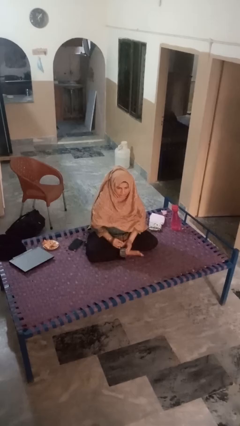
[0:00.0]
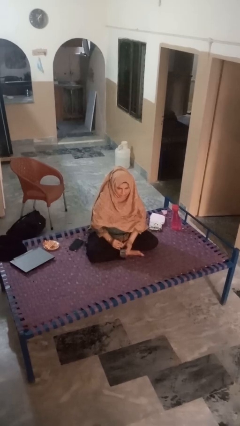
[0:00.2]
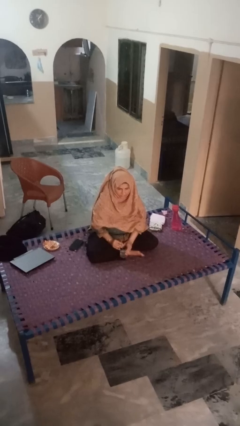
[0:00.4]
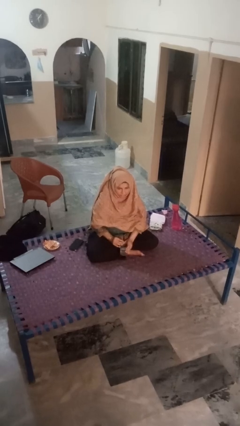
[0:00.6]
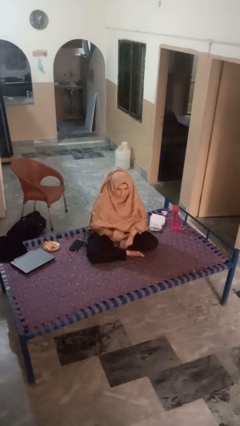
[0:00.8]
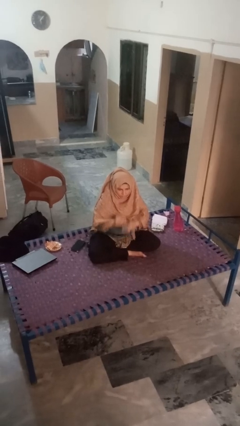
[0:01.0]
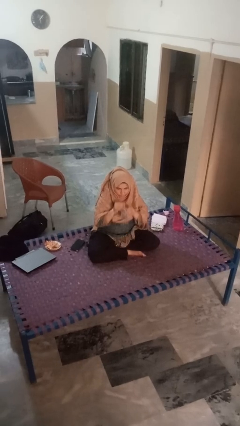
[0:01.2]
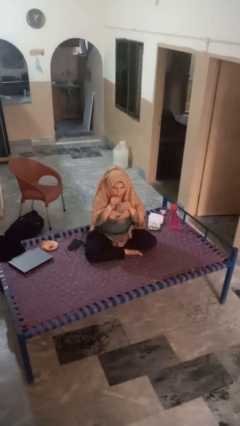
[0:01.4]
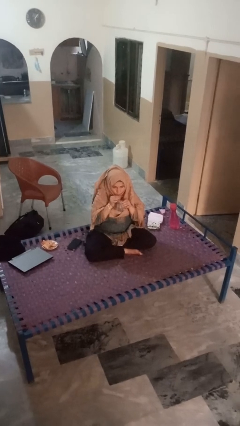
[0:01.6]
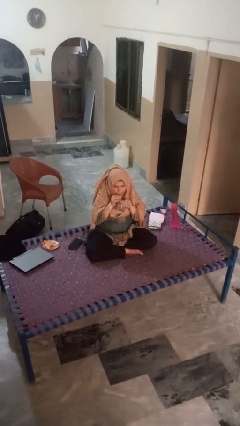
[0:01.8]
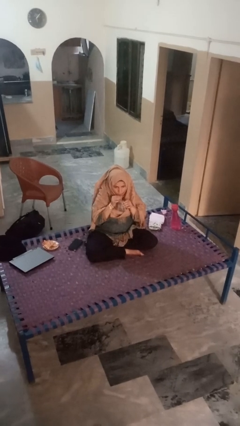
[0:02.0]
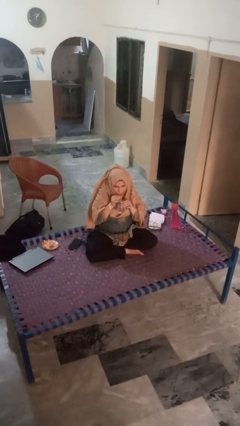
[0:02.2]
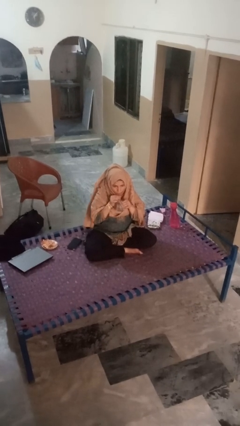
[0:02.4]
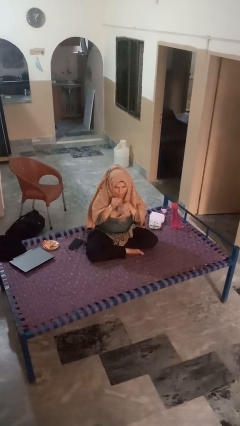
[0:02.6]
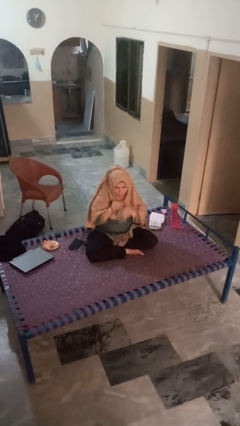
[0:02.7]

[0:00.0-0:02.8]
person drinks from straw

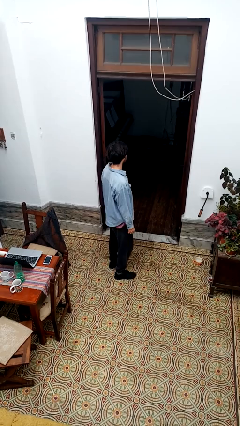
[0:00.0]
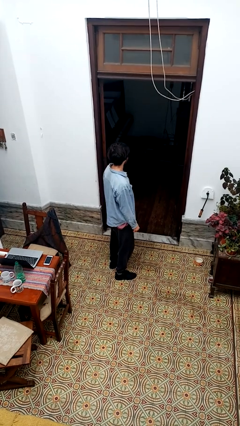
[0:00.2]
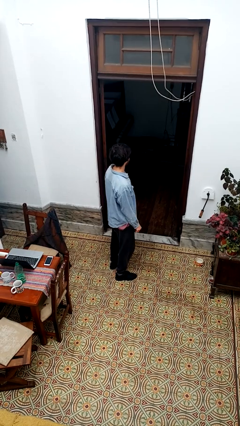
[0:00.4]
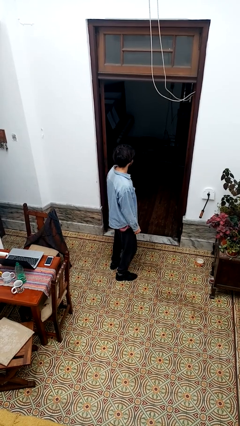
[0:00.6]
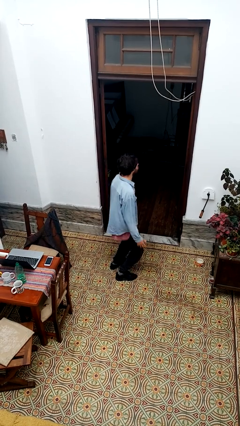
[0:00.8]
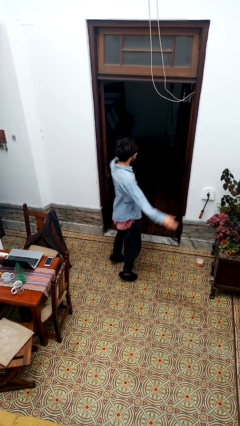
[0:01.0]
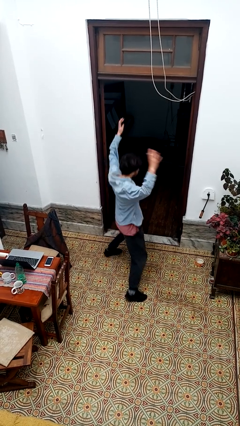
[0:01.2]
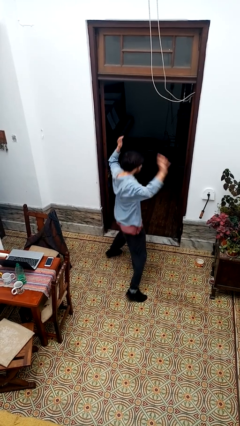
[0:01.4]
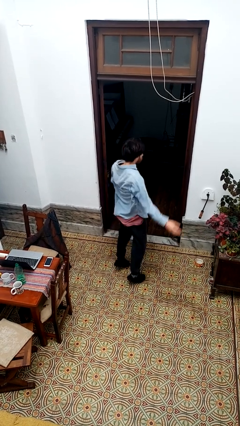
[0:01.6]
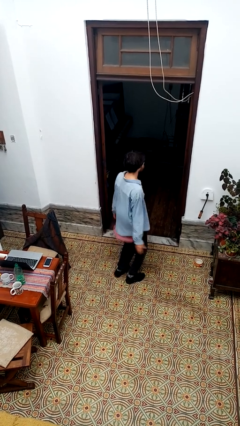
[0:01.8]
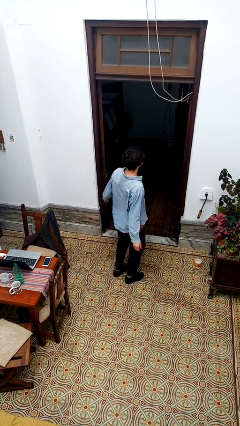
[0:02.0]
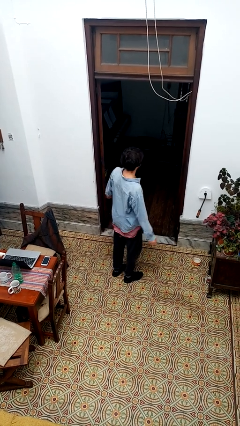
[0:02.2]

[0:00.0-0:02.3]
person exercises with jumping jacks

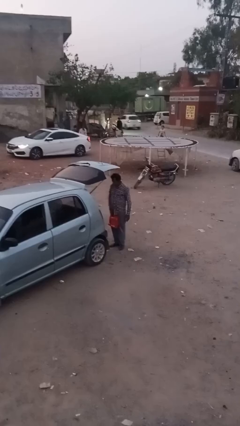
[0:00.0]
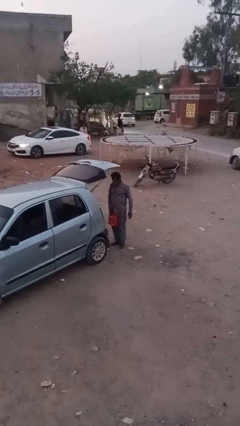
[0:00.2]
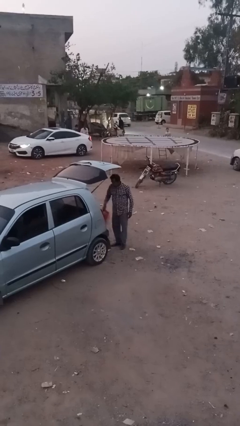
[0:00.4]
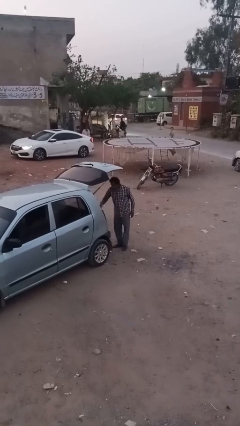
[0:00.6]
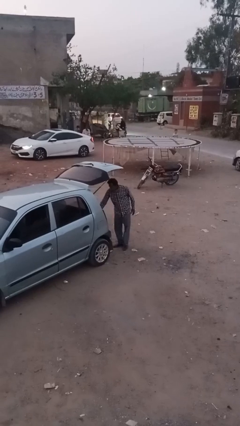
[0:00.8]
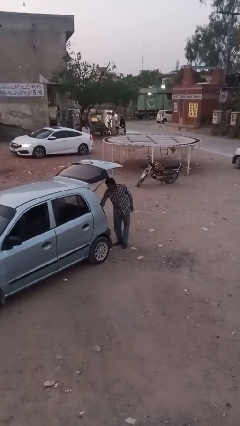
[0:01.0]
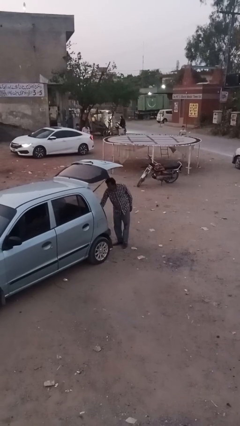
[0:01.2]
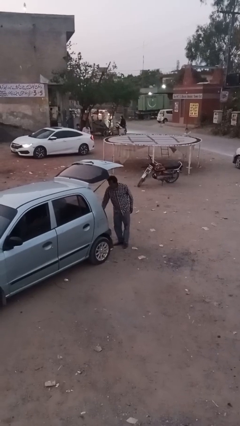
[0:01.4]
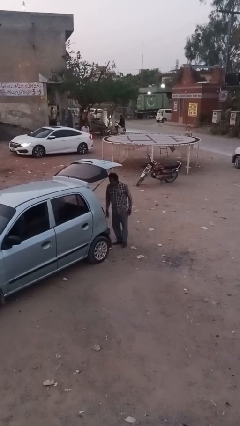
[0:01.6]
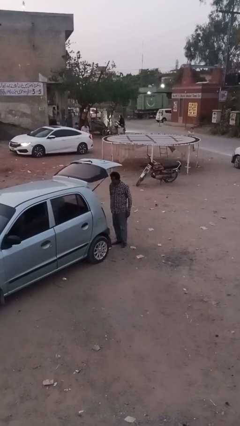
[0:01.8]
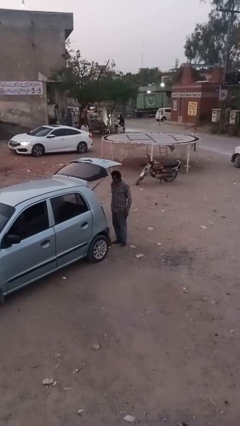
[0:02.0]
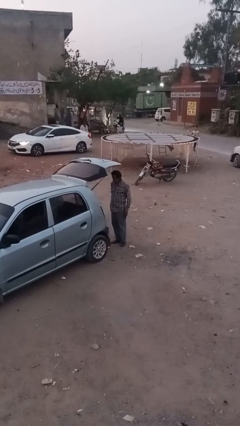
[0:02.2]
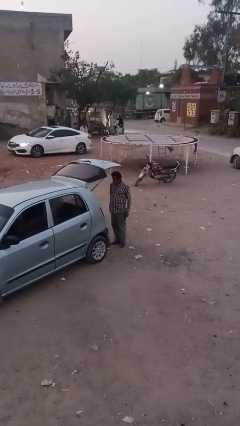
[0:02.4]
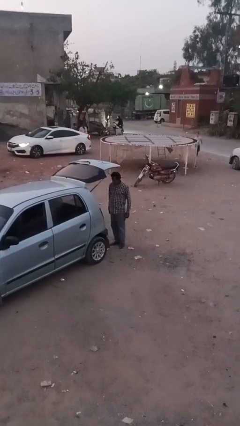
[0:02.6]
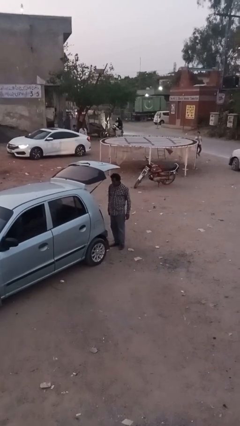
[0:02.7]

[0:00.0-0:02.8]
person loads car

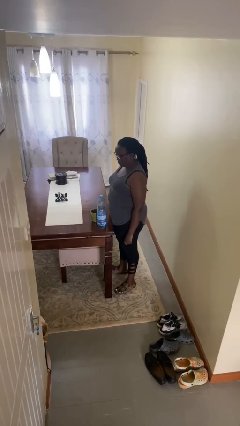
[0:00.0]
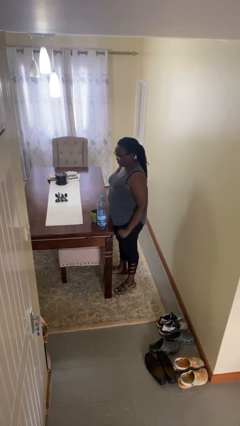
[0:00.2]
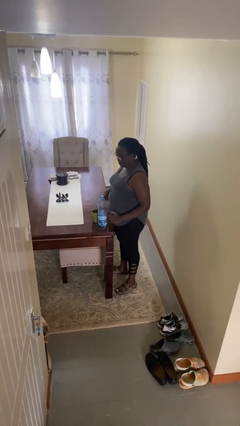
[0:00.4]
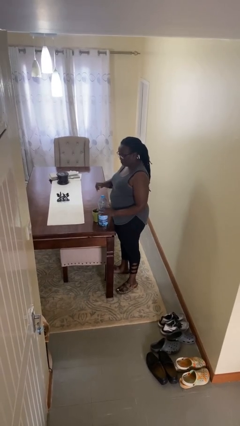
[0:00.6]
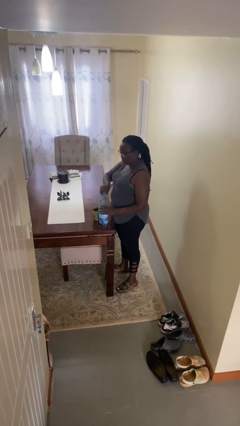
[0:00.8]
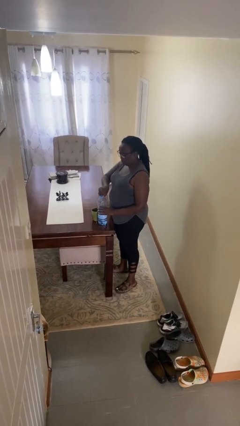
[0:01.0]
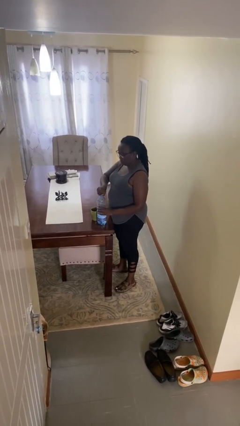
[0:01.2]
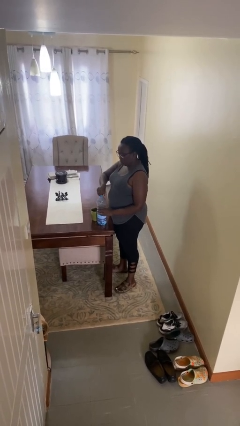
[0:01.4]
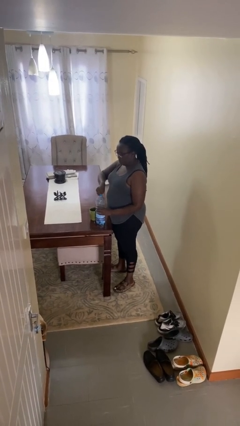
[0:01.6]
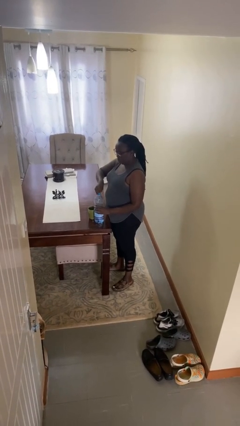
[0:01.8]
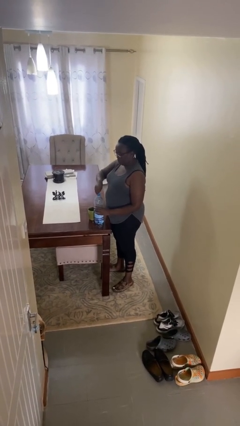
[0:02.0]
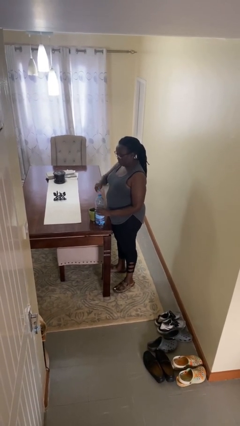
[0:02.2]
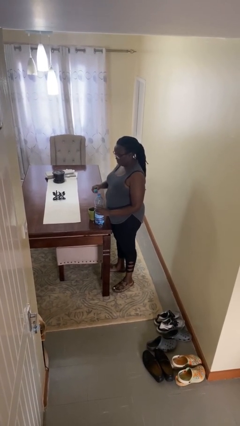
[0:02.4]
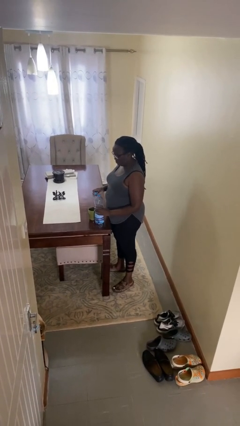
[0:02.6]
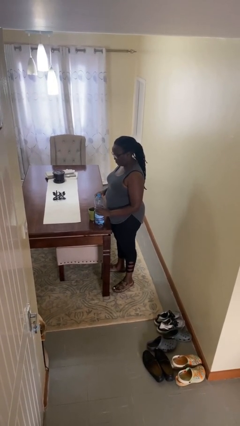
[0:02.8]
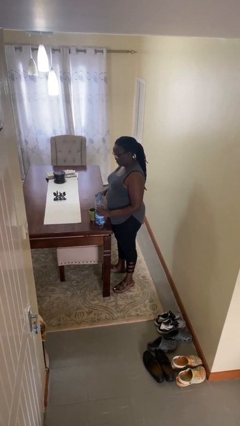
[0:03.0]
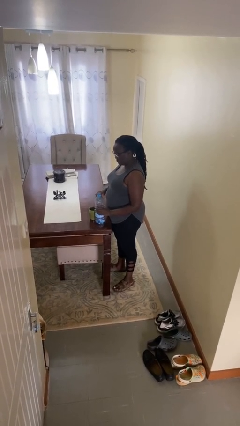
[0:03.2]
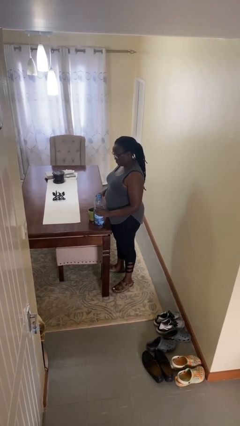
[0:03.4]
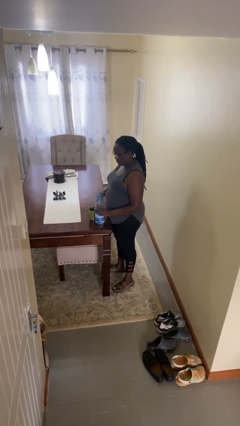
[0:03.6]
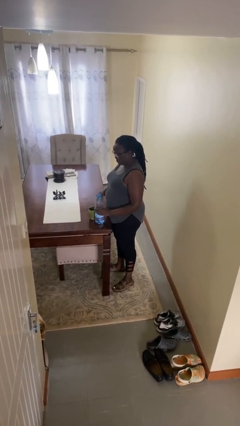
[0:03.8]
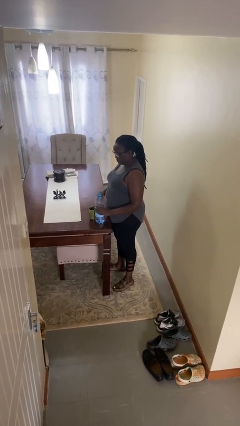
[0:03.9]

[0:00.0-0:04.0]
person unscrews lid from bottle

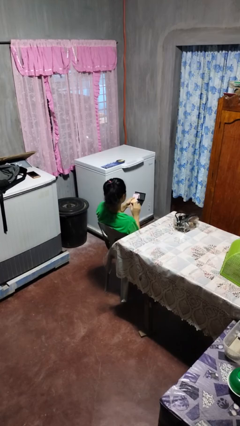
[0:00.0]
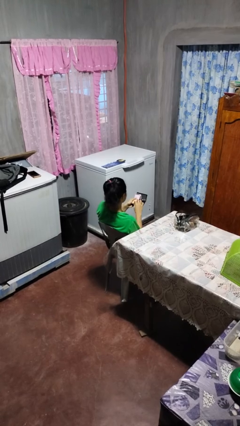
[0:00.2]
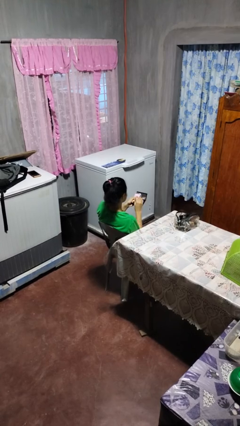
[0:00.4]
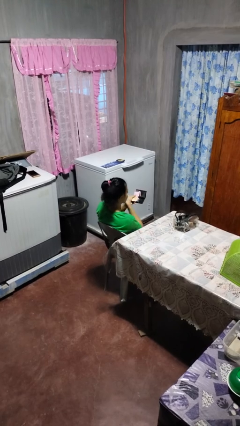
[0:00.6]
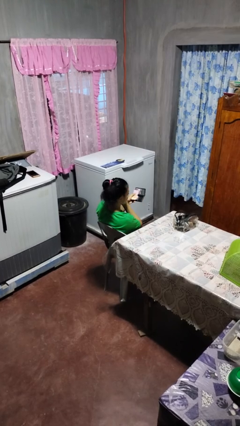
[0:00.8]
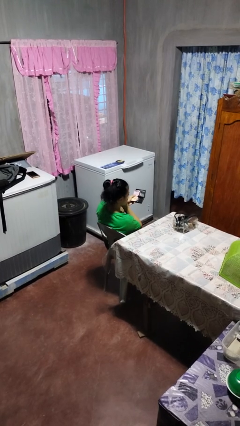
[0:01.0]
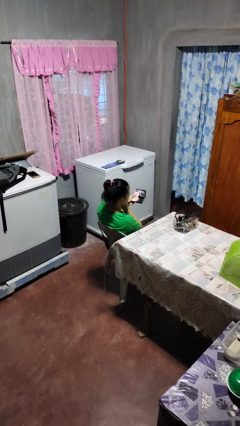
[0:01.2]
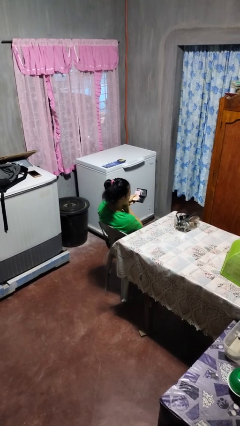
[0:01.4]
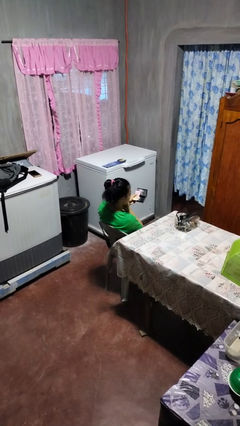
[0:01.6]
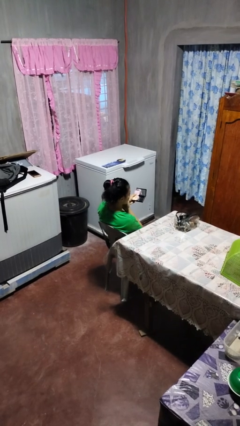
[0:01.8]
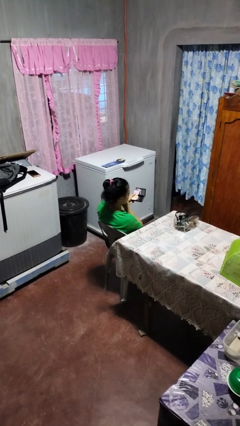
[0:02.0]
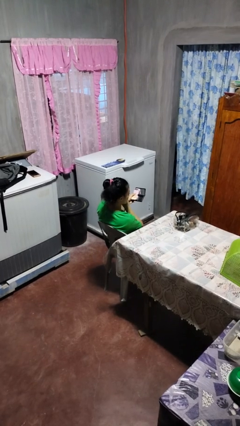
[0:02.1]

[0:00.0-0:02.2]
person applies foundation makeup

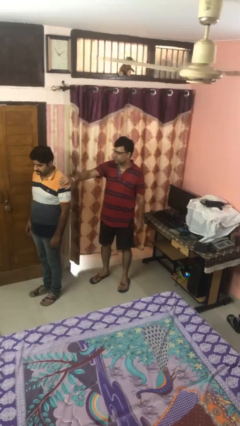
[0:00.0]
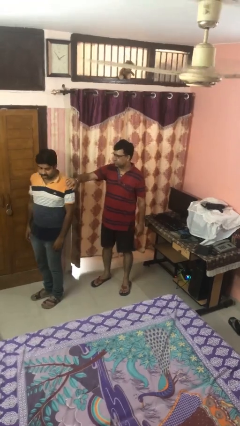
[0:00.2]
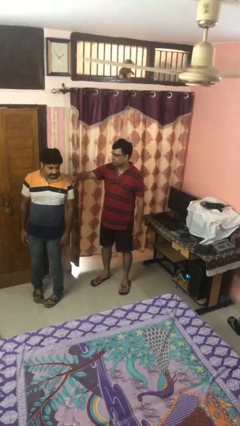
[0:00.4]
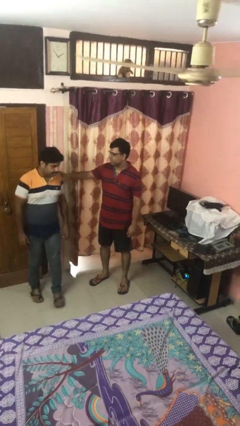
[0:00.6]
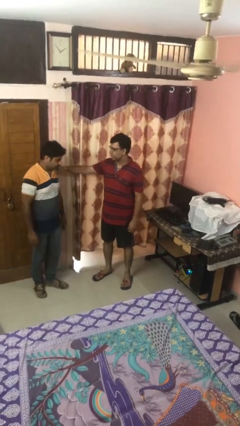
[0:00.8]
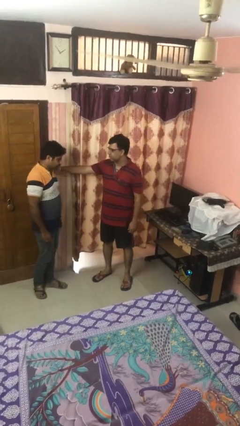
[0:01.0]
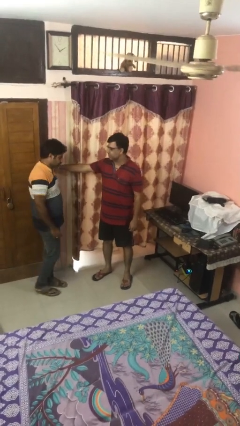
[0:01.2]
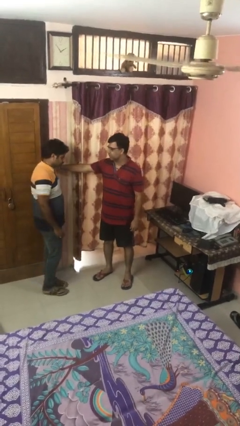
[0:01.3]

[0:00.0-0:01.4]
person spins person around

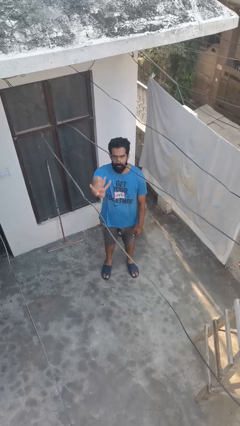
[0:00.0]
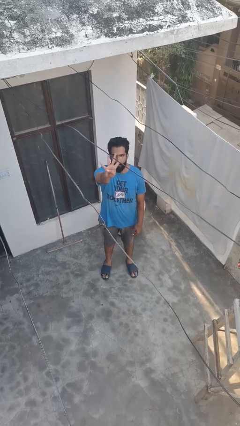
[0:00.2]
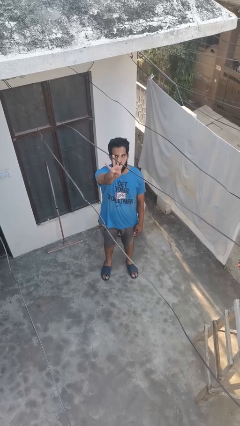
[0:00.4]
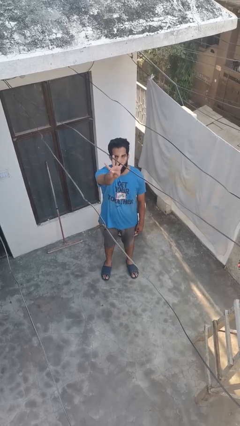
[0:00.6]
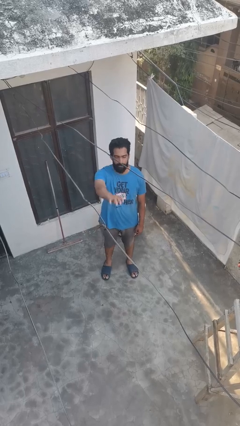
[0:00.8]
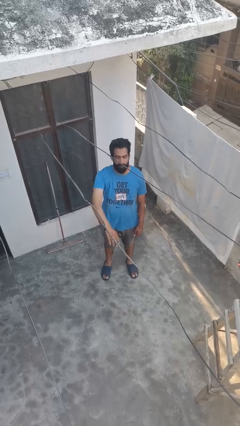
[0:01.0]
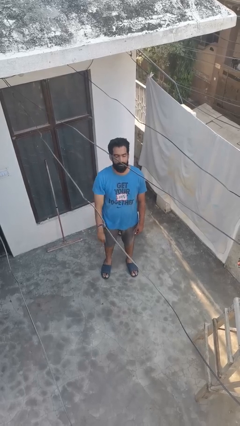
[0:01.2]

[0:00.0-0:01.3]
person gestures number four

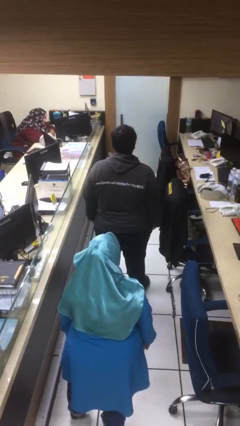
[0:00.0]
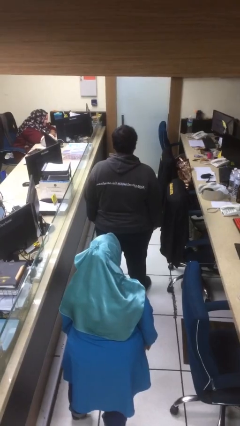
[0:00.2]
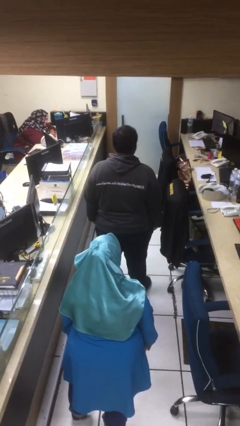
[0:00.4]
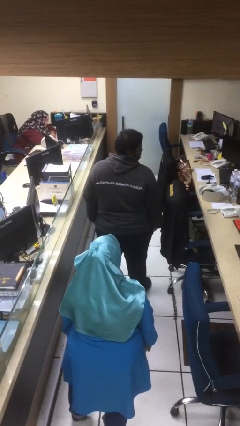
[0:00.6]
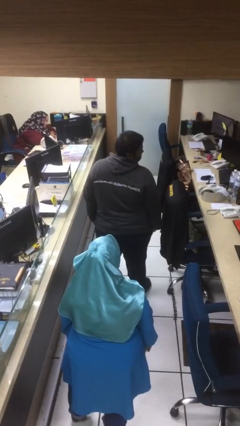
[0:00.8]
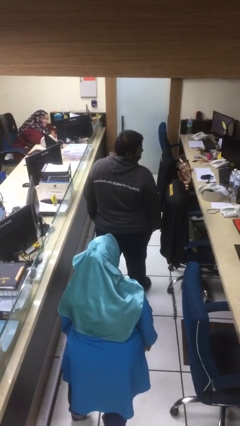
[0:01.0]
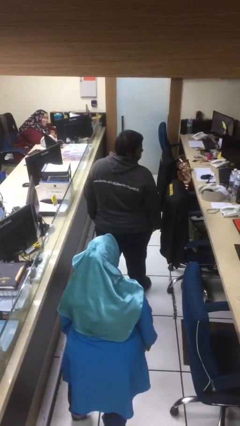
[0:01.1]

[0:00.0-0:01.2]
person looks over shoulder
